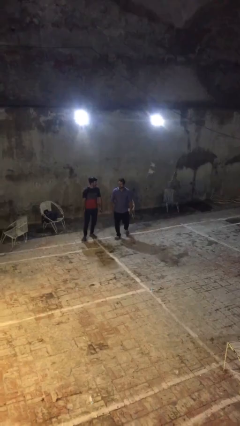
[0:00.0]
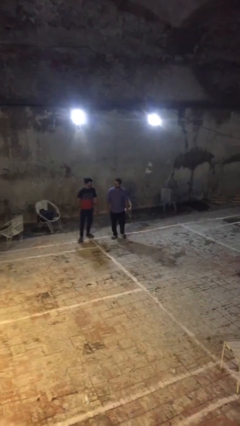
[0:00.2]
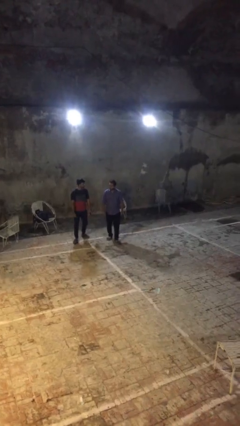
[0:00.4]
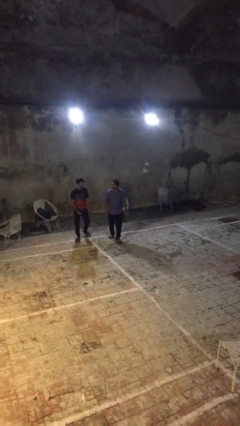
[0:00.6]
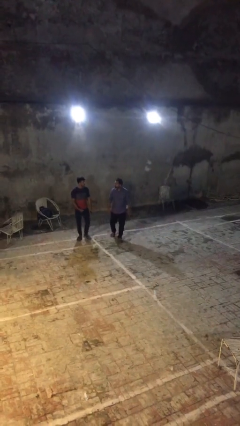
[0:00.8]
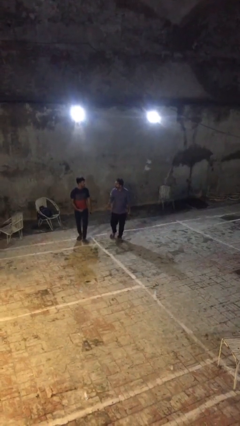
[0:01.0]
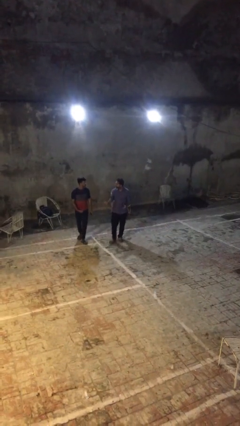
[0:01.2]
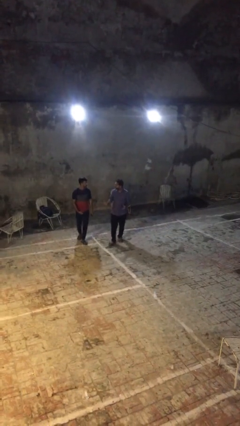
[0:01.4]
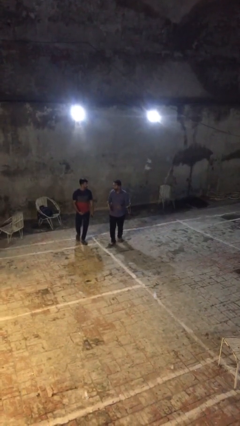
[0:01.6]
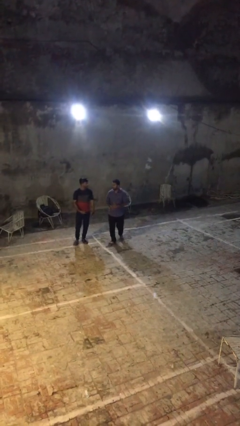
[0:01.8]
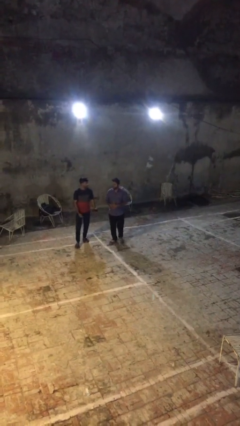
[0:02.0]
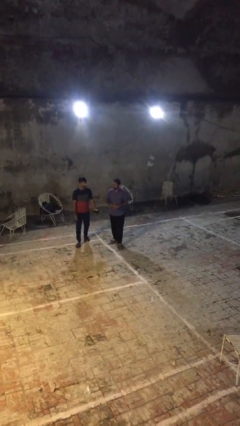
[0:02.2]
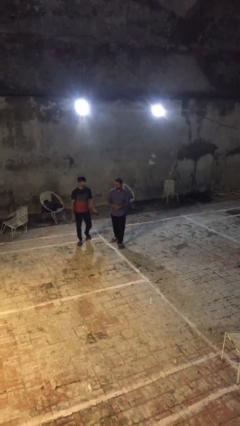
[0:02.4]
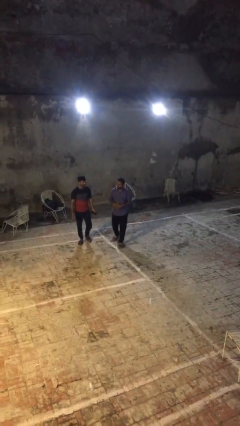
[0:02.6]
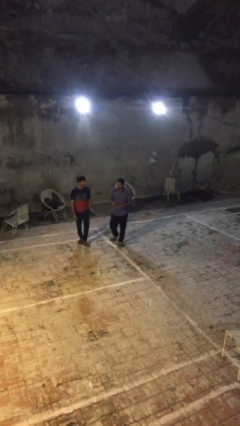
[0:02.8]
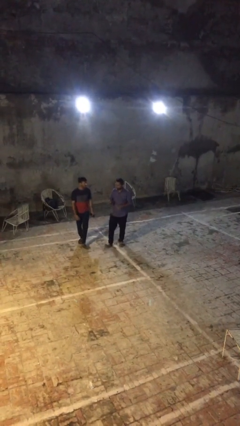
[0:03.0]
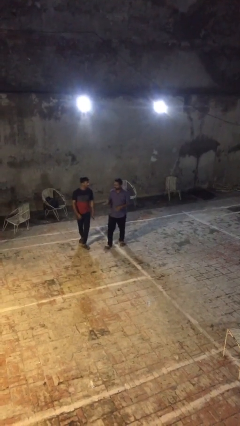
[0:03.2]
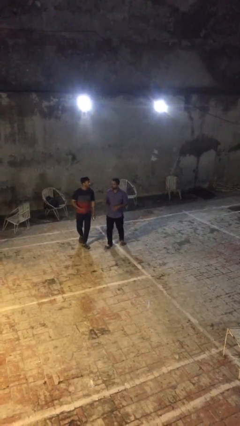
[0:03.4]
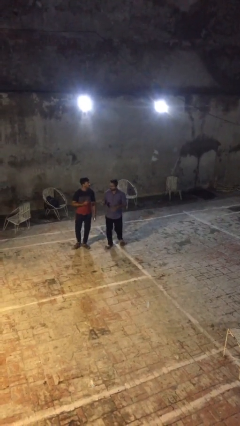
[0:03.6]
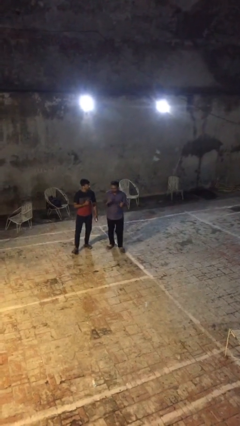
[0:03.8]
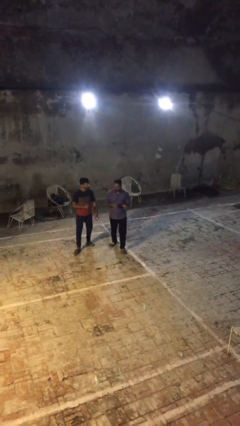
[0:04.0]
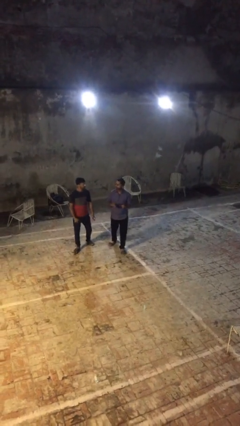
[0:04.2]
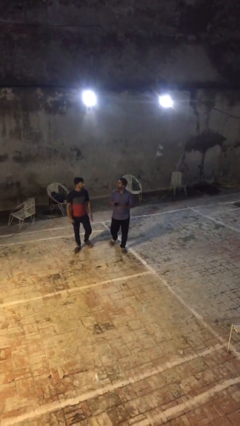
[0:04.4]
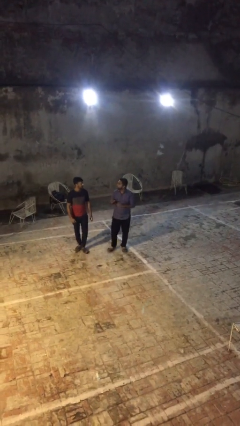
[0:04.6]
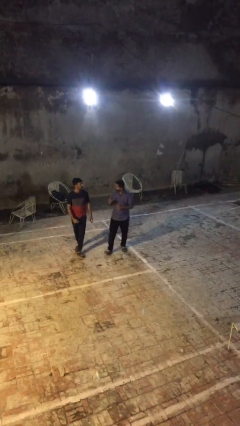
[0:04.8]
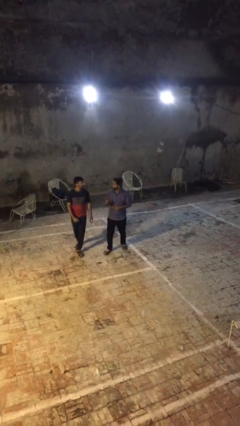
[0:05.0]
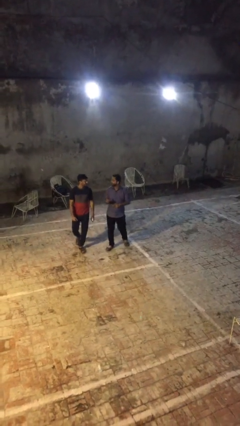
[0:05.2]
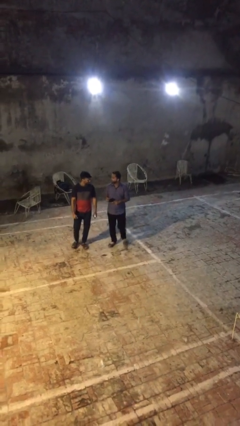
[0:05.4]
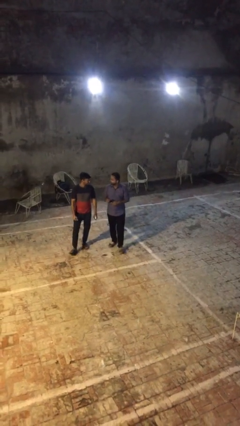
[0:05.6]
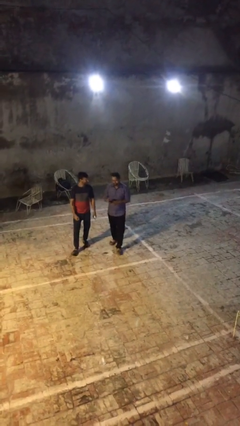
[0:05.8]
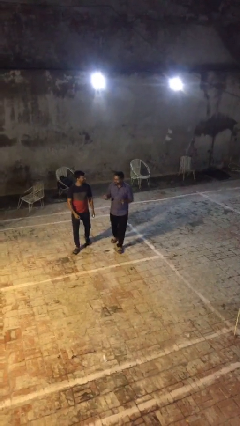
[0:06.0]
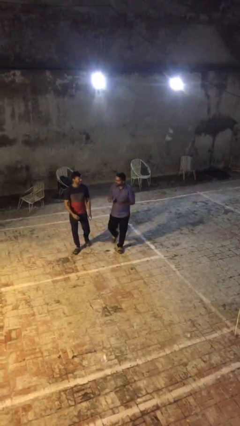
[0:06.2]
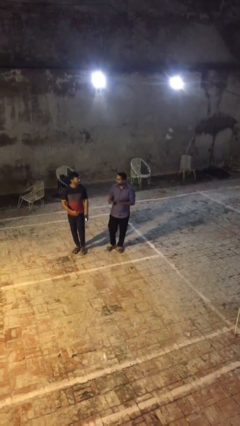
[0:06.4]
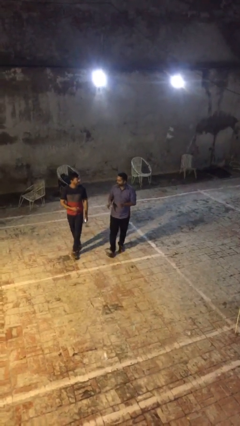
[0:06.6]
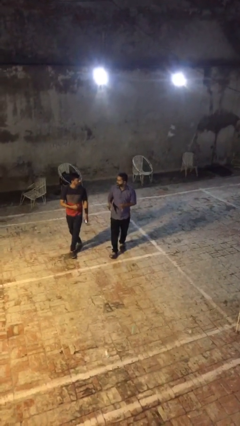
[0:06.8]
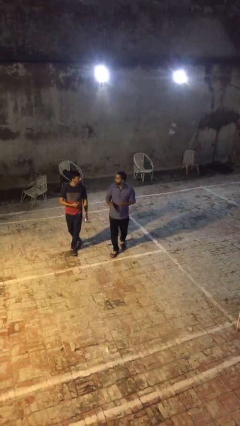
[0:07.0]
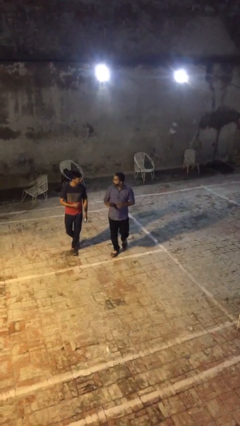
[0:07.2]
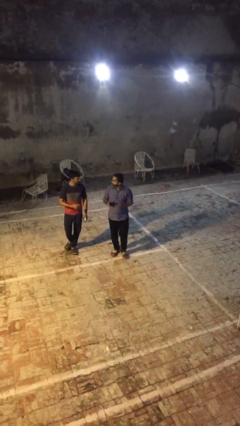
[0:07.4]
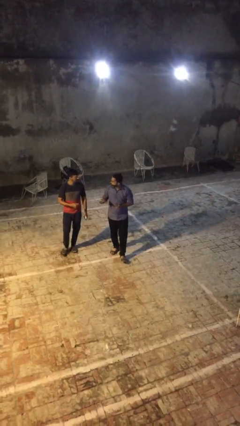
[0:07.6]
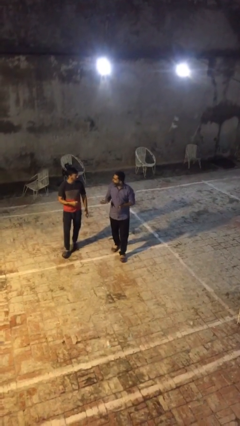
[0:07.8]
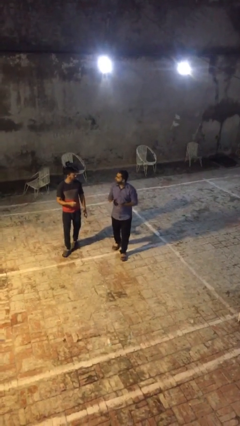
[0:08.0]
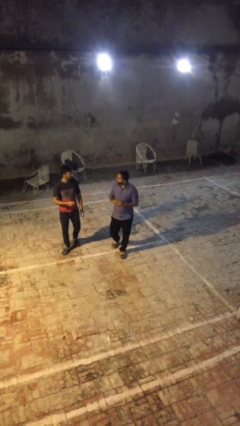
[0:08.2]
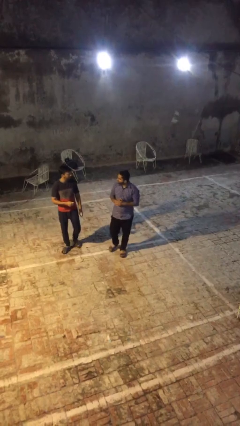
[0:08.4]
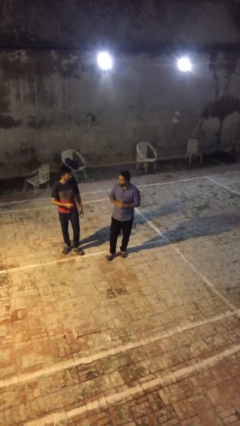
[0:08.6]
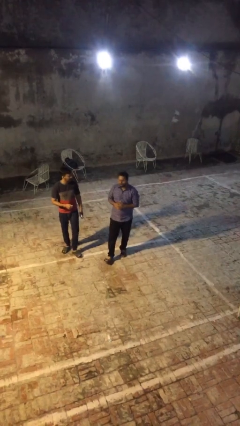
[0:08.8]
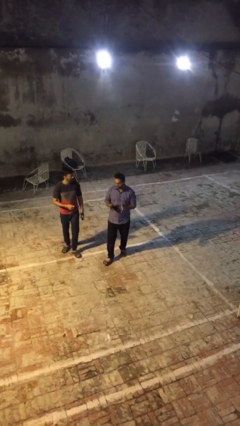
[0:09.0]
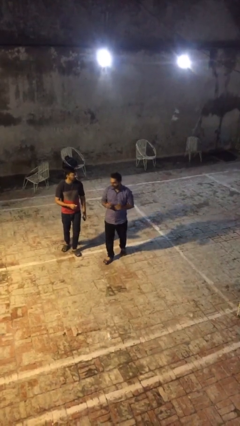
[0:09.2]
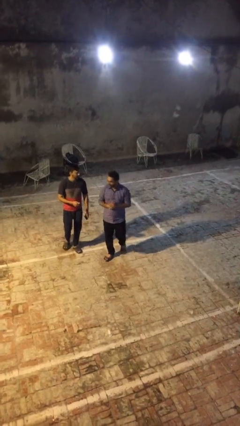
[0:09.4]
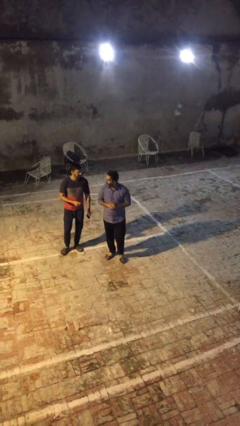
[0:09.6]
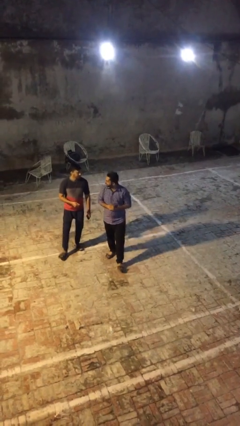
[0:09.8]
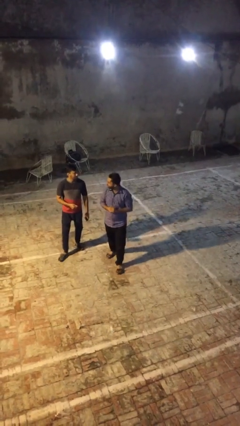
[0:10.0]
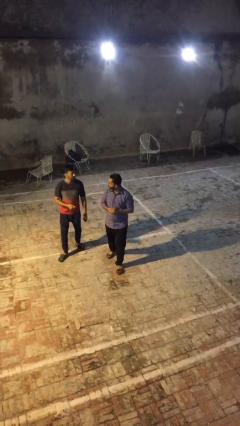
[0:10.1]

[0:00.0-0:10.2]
person talks to person

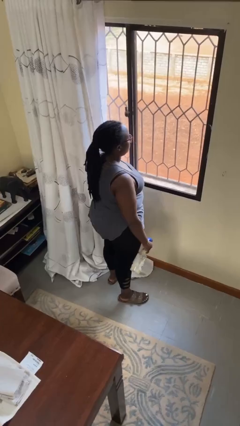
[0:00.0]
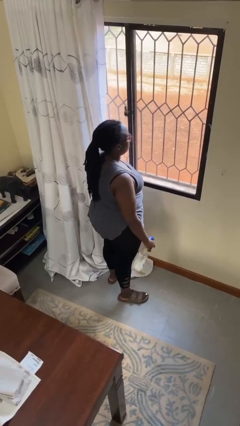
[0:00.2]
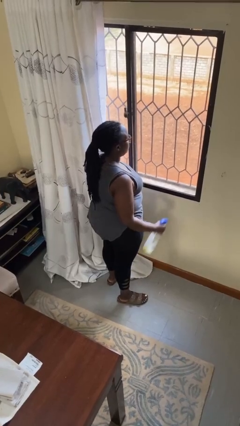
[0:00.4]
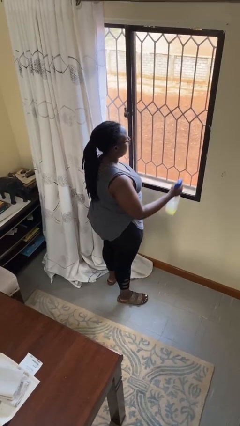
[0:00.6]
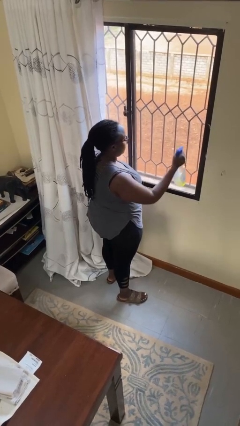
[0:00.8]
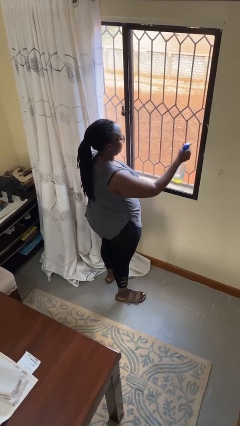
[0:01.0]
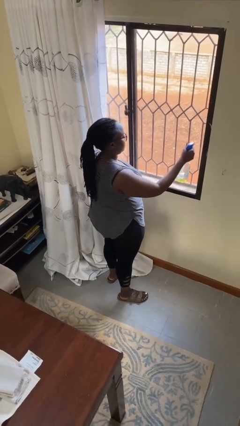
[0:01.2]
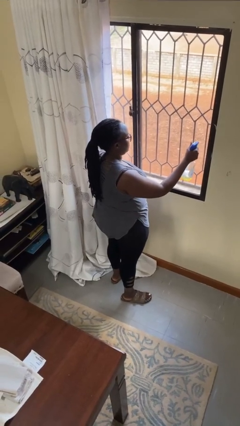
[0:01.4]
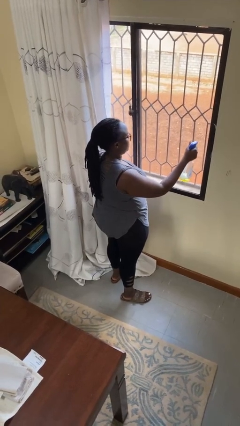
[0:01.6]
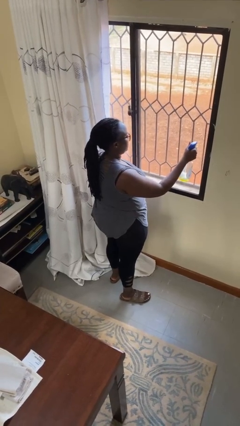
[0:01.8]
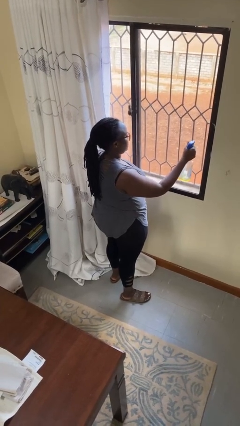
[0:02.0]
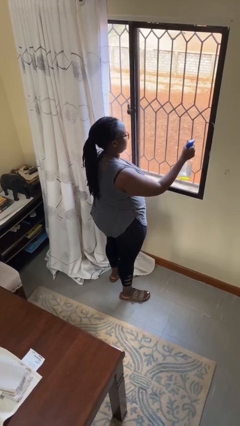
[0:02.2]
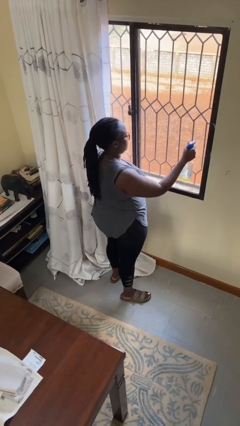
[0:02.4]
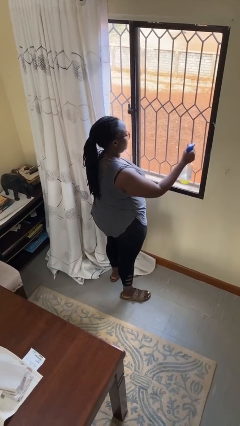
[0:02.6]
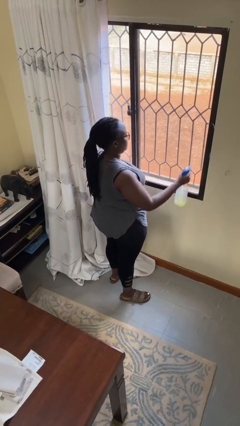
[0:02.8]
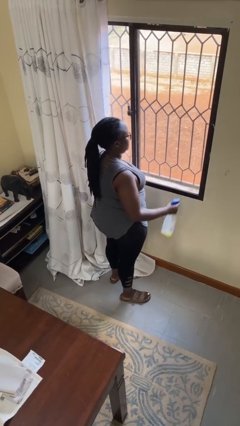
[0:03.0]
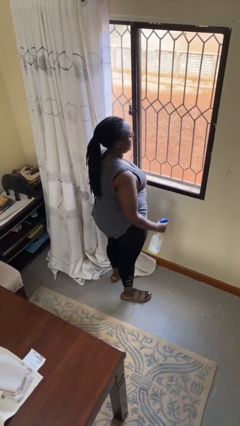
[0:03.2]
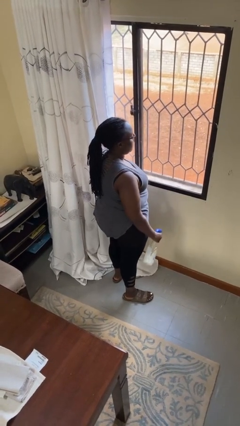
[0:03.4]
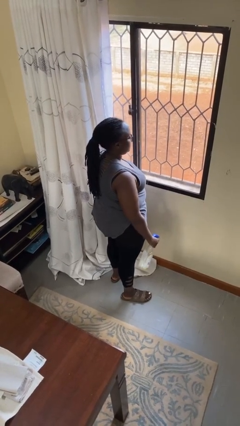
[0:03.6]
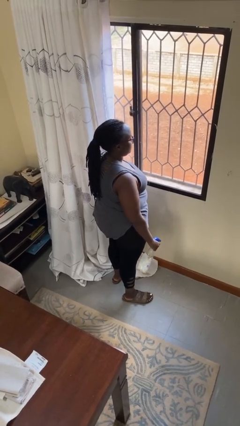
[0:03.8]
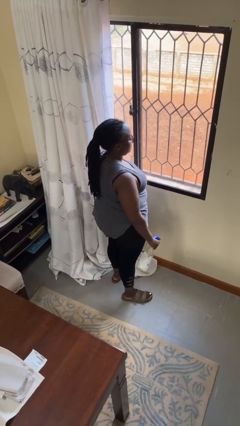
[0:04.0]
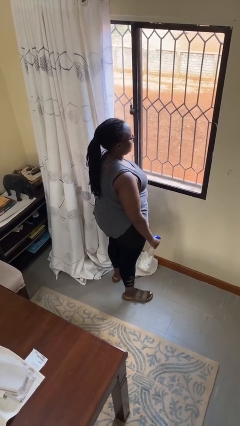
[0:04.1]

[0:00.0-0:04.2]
person sprays from bottle

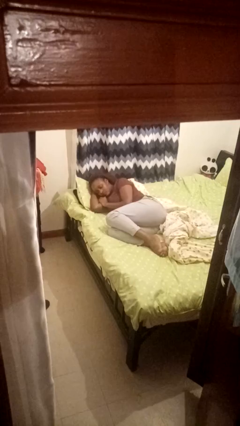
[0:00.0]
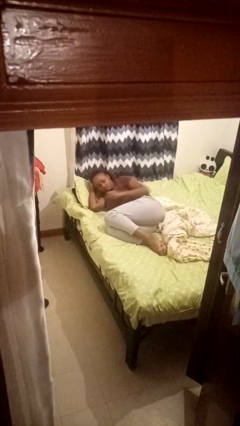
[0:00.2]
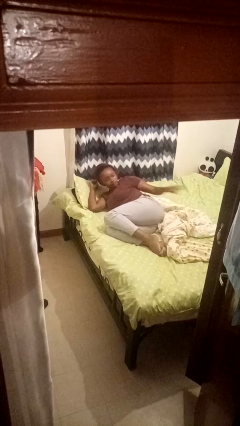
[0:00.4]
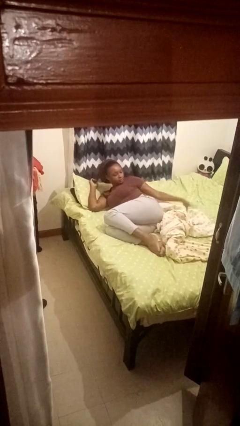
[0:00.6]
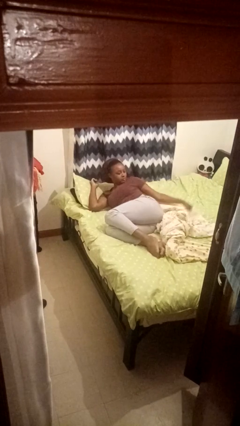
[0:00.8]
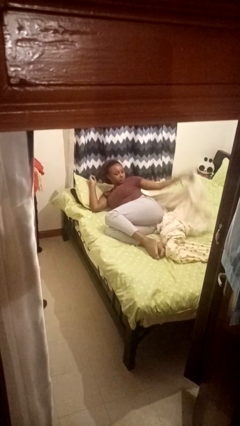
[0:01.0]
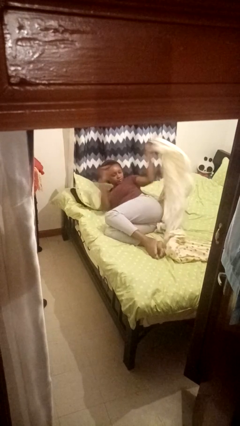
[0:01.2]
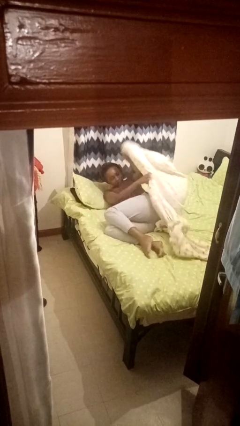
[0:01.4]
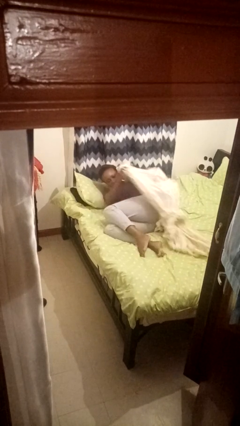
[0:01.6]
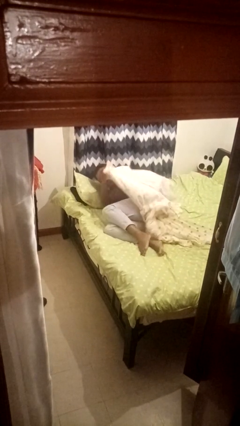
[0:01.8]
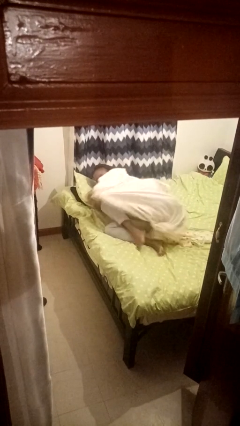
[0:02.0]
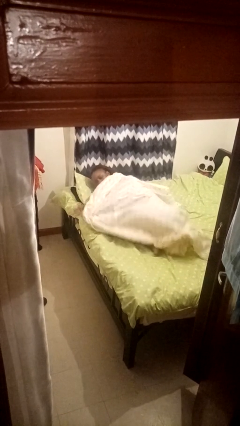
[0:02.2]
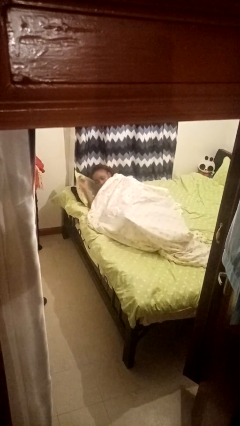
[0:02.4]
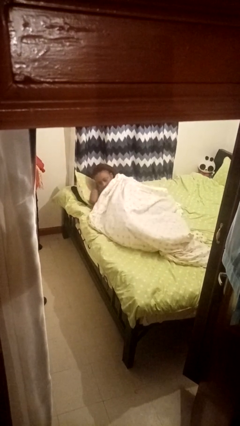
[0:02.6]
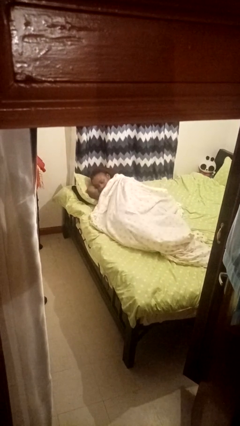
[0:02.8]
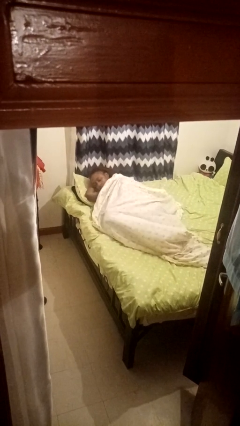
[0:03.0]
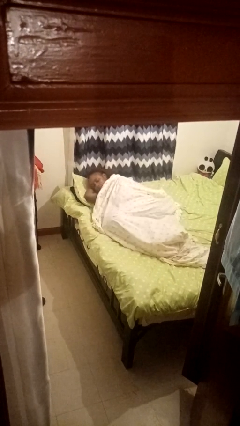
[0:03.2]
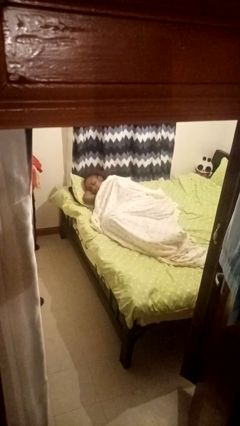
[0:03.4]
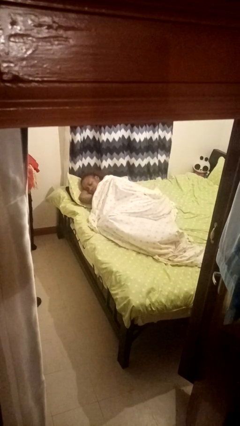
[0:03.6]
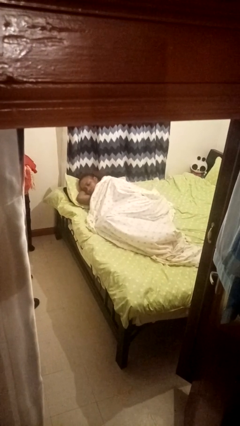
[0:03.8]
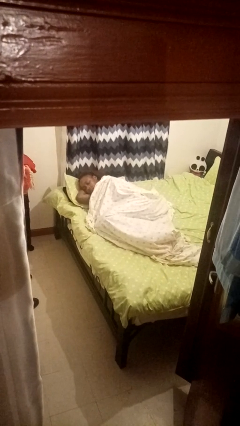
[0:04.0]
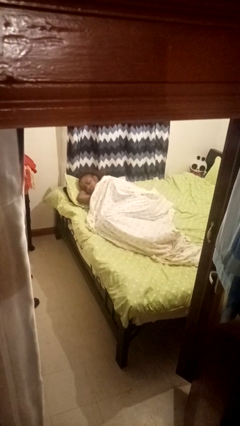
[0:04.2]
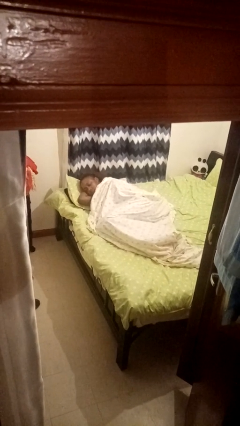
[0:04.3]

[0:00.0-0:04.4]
person covers with bedsheets
